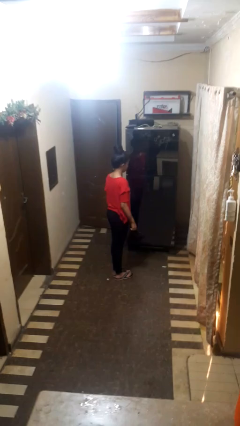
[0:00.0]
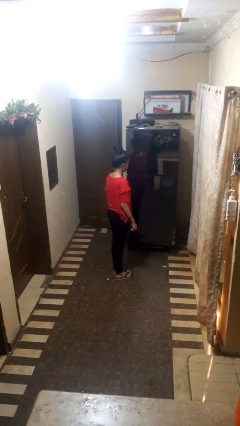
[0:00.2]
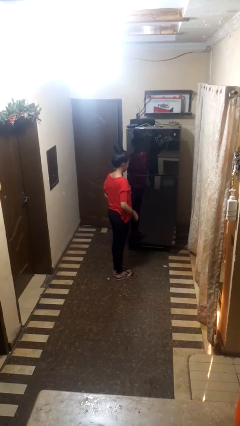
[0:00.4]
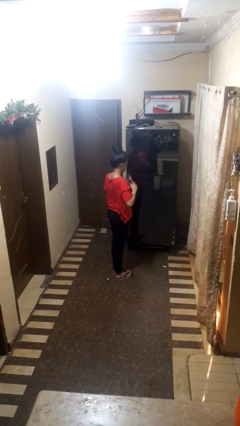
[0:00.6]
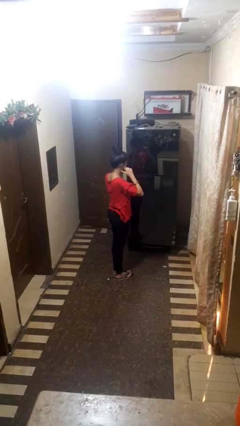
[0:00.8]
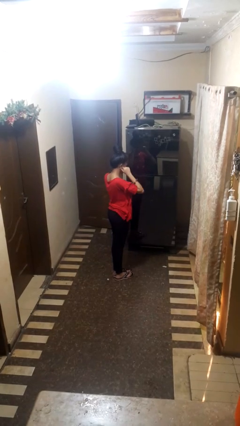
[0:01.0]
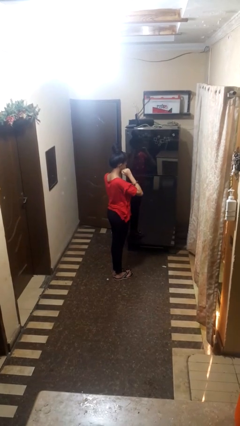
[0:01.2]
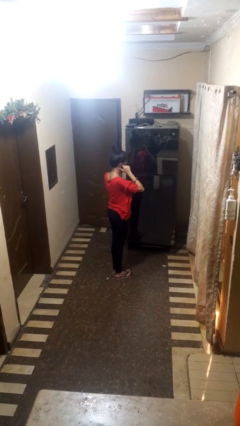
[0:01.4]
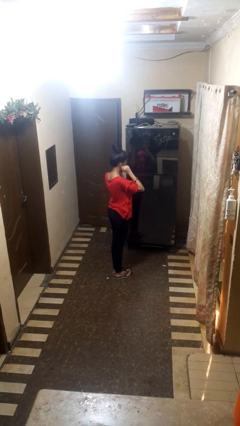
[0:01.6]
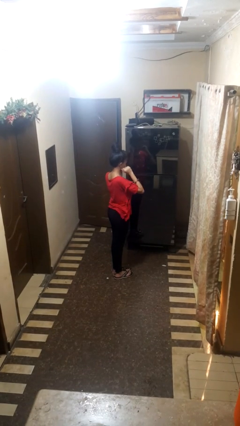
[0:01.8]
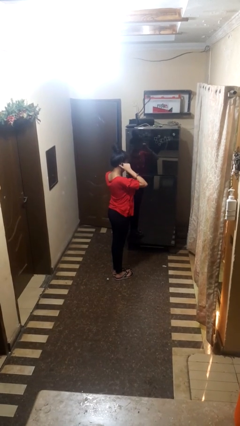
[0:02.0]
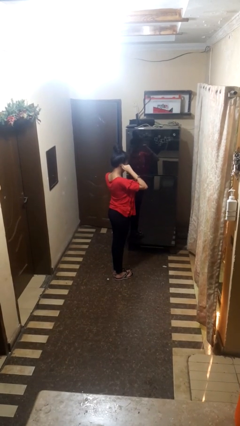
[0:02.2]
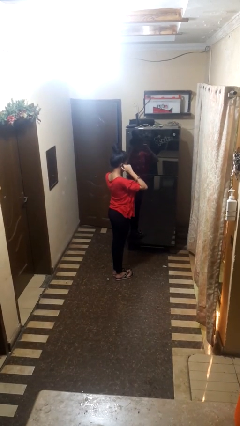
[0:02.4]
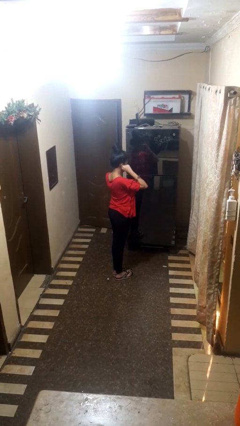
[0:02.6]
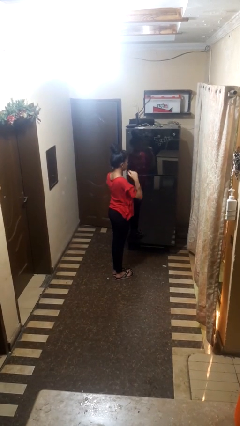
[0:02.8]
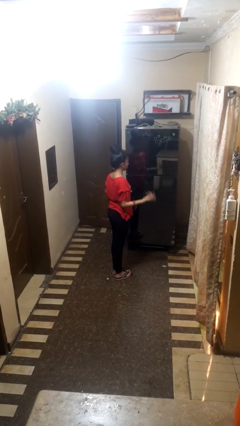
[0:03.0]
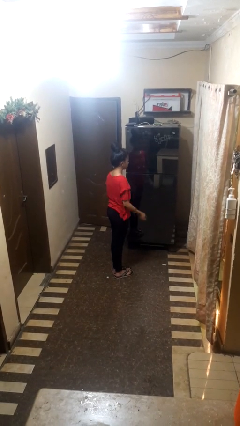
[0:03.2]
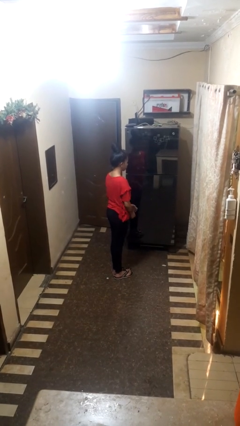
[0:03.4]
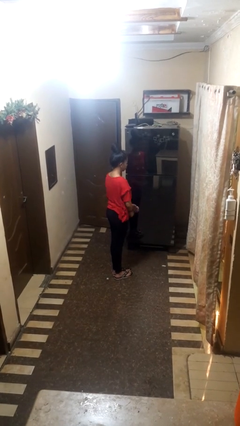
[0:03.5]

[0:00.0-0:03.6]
person touches earlobe

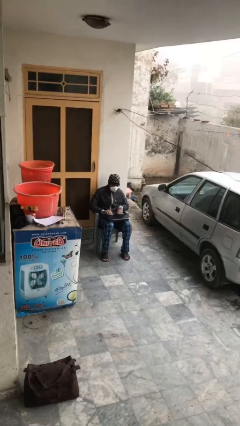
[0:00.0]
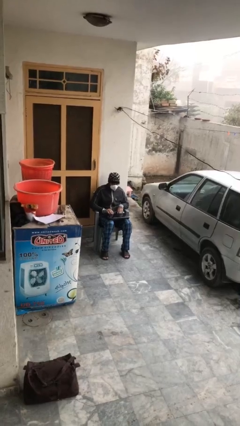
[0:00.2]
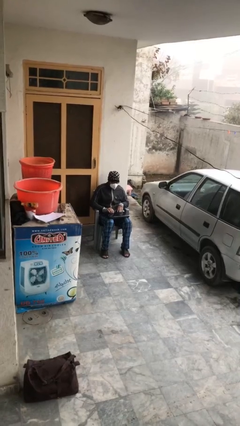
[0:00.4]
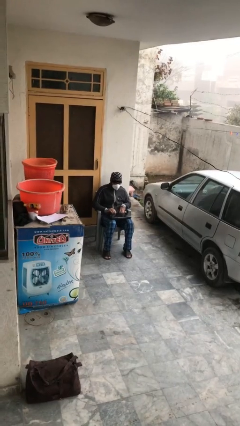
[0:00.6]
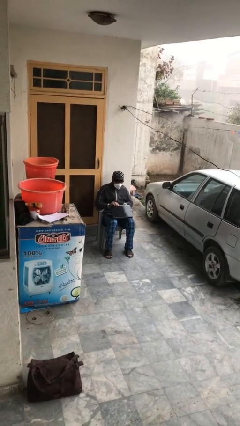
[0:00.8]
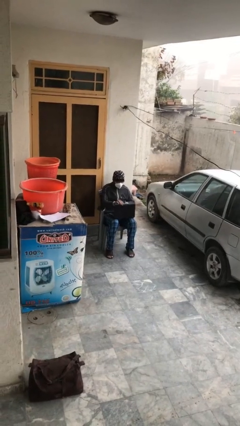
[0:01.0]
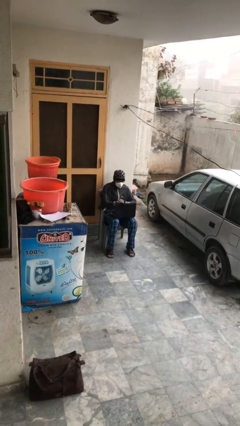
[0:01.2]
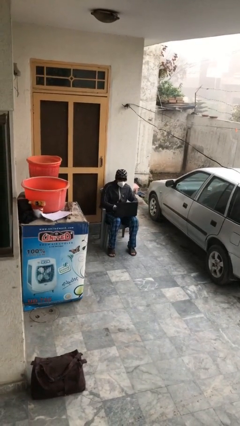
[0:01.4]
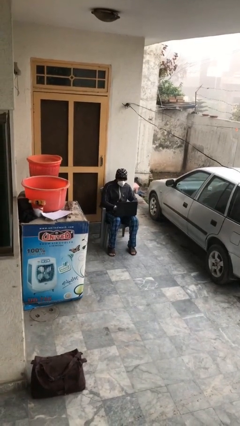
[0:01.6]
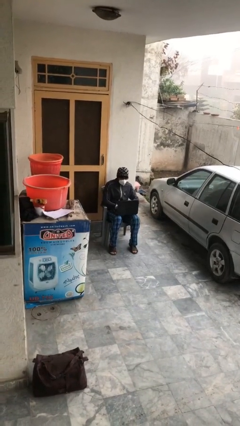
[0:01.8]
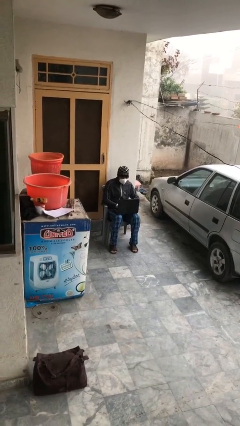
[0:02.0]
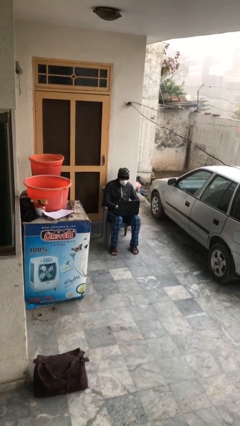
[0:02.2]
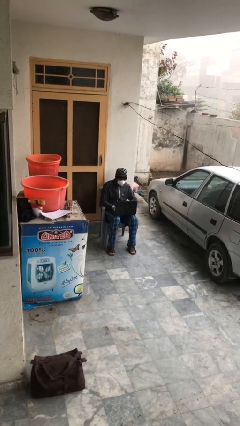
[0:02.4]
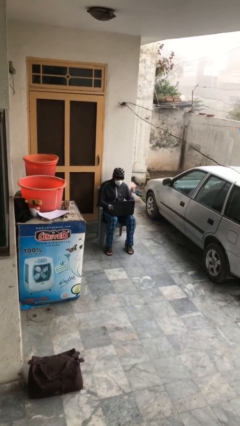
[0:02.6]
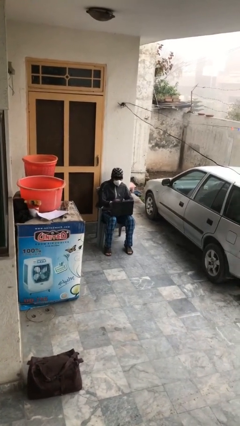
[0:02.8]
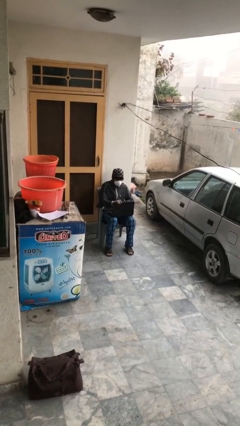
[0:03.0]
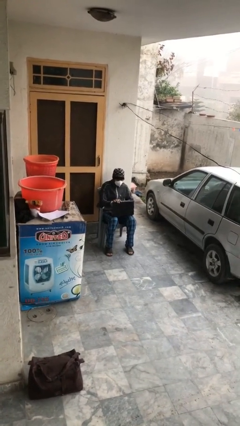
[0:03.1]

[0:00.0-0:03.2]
person interacts with laptop

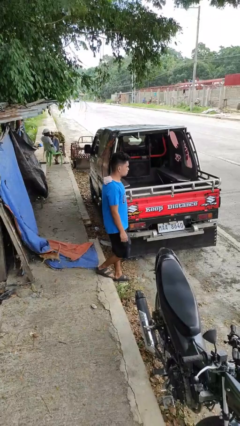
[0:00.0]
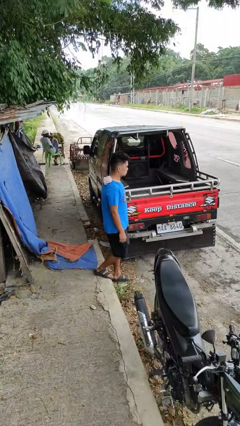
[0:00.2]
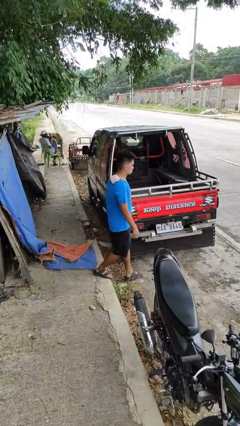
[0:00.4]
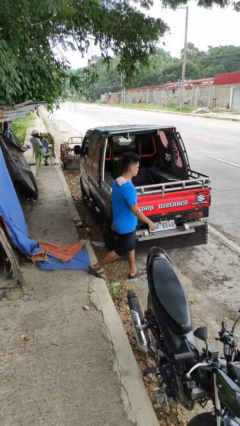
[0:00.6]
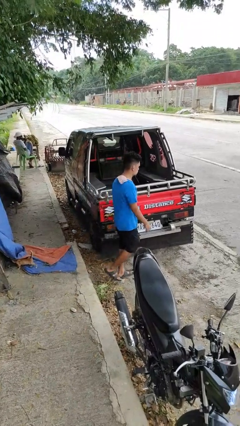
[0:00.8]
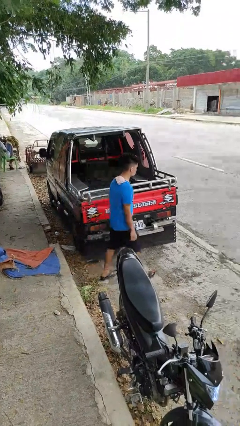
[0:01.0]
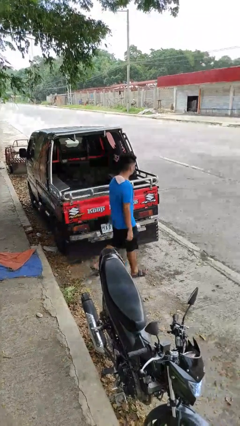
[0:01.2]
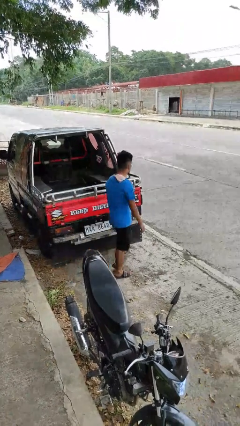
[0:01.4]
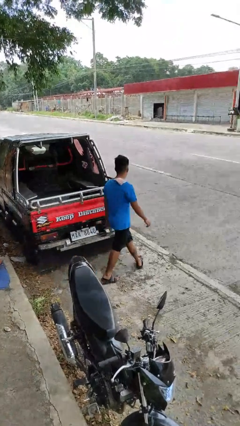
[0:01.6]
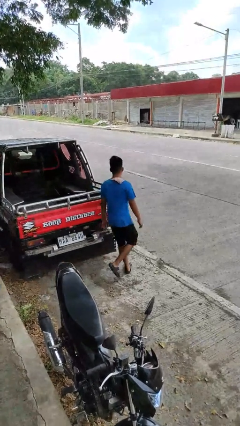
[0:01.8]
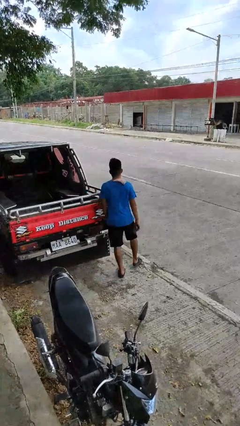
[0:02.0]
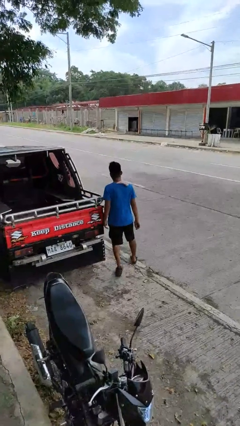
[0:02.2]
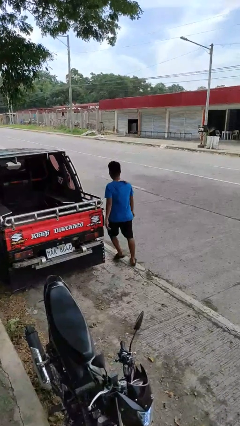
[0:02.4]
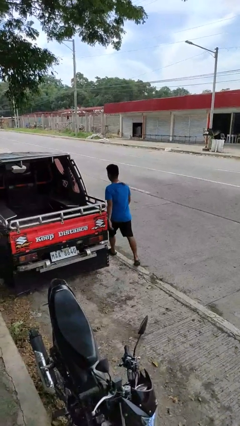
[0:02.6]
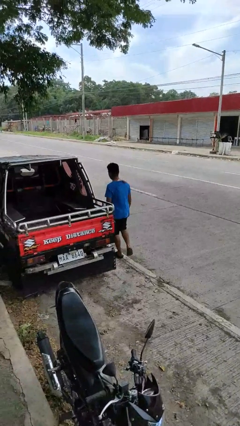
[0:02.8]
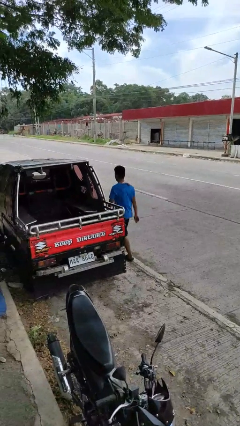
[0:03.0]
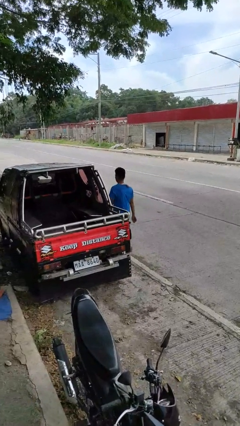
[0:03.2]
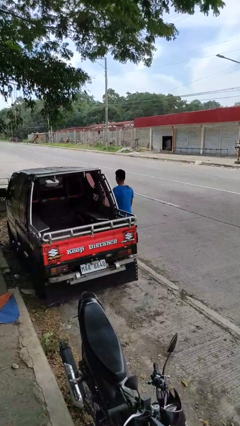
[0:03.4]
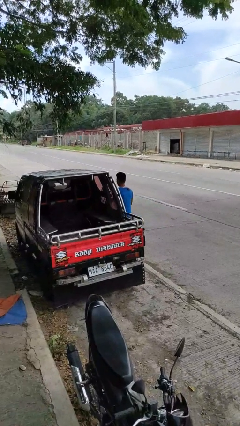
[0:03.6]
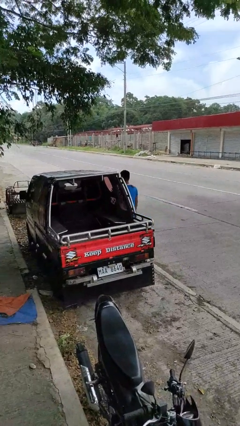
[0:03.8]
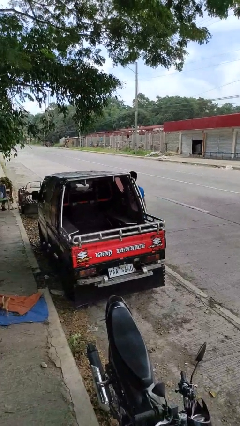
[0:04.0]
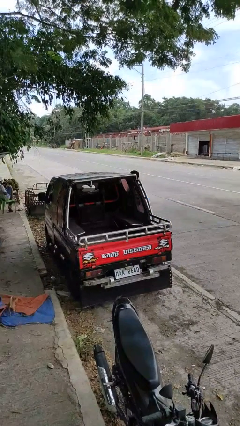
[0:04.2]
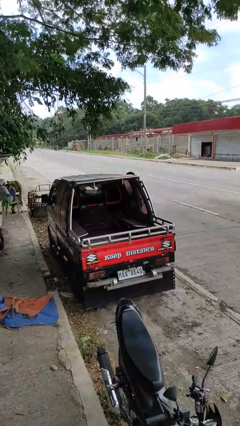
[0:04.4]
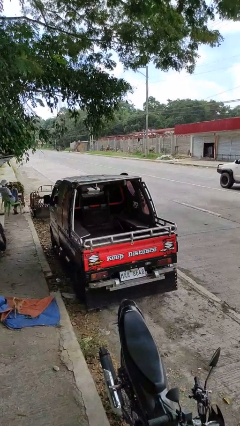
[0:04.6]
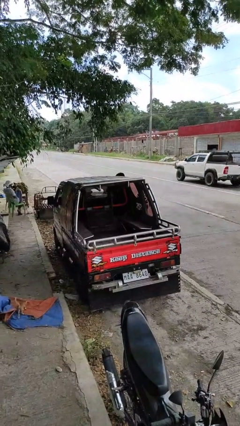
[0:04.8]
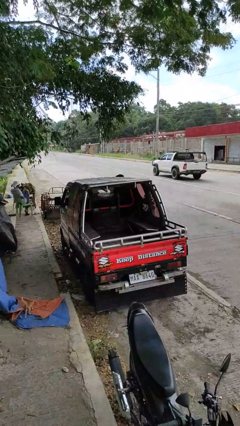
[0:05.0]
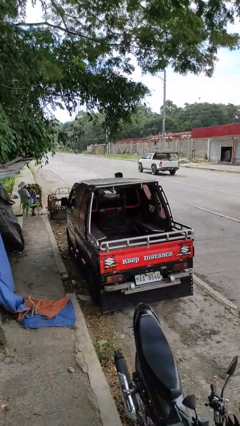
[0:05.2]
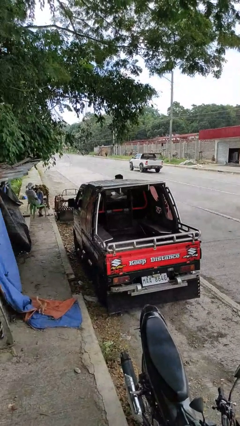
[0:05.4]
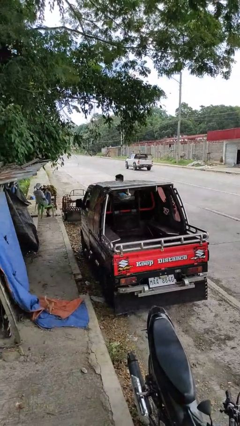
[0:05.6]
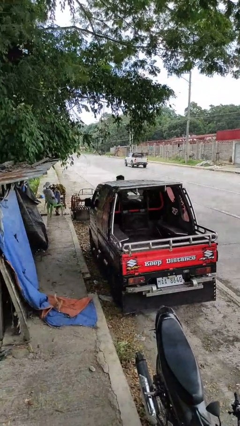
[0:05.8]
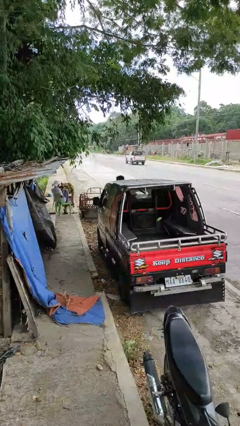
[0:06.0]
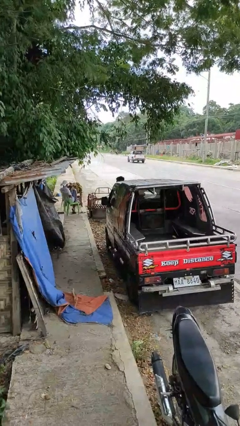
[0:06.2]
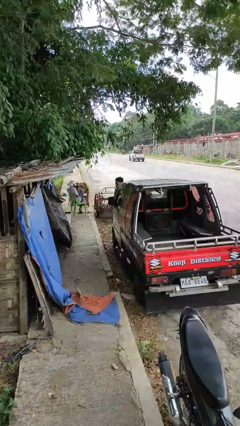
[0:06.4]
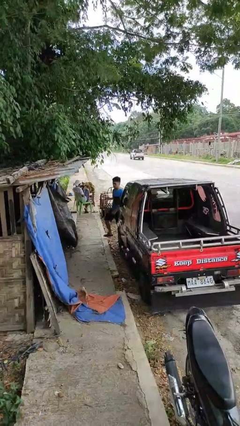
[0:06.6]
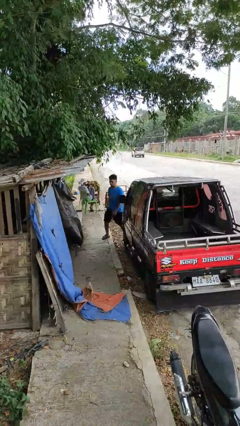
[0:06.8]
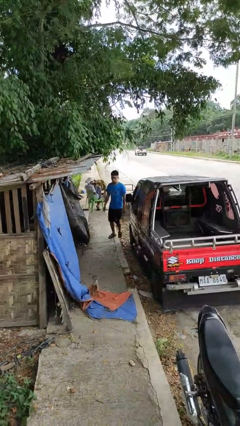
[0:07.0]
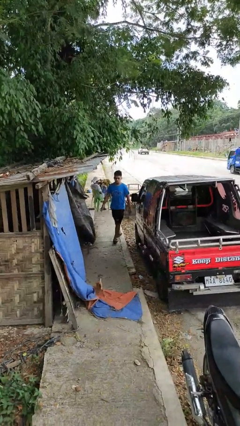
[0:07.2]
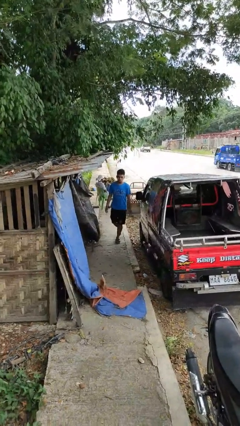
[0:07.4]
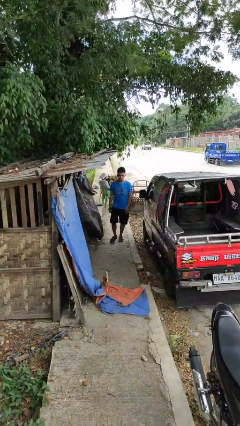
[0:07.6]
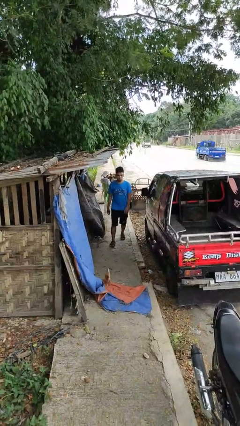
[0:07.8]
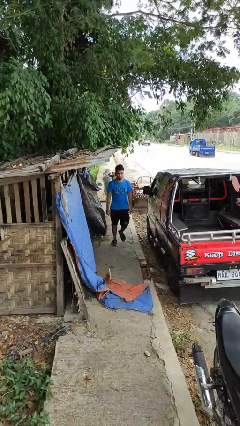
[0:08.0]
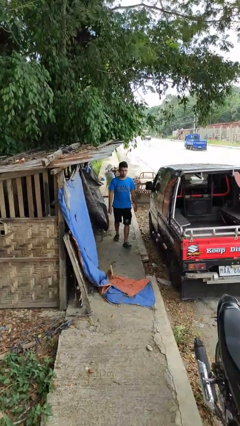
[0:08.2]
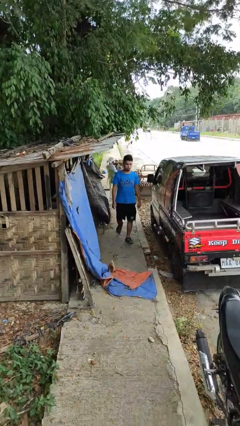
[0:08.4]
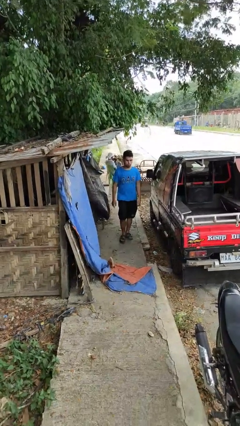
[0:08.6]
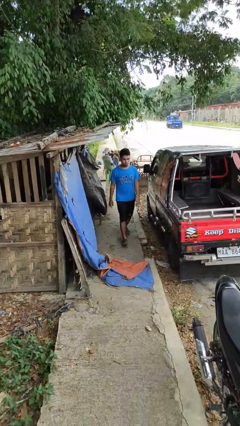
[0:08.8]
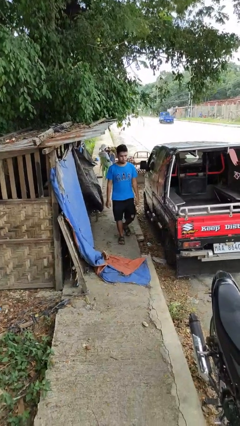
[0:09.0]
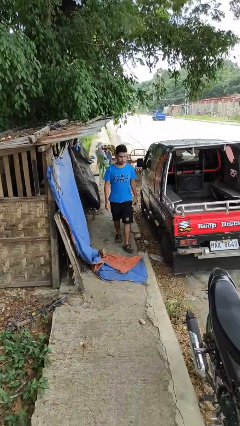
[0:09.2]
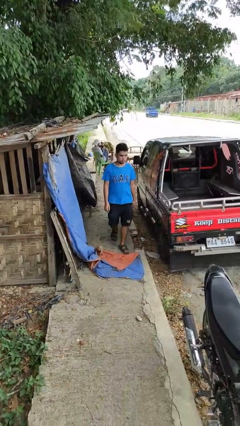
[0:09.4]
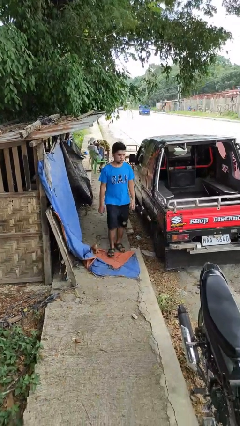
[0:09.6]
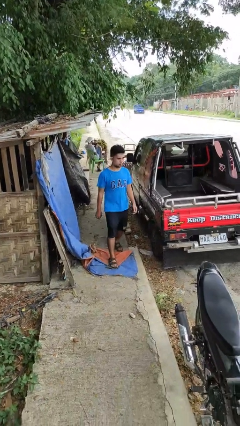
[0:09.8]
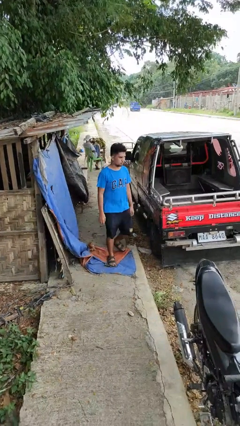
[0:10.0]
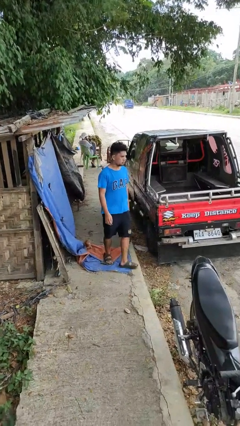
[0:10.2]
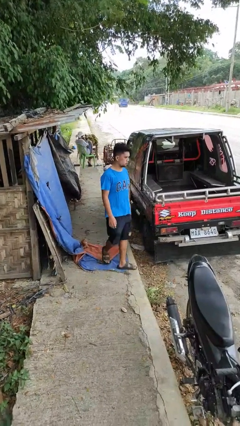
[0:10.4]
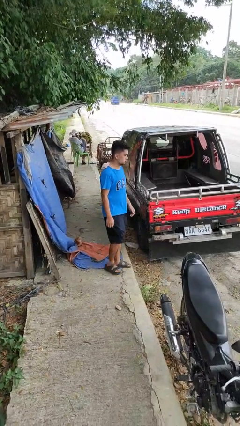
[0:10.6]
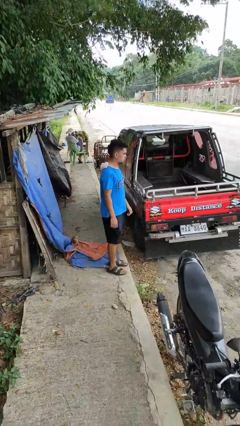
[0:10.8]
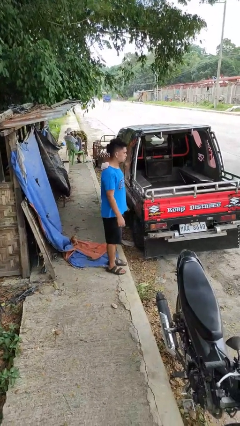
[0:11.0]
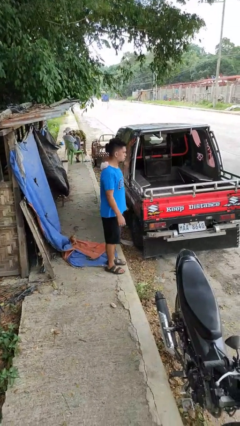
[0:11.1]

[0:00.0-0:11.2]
person walks around car
